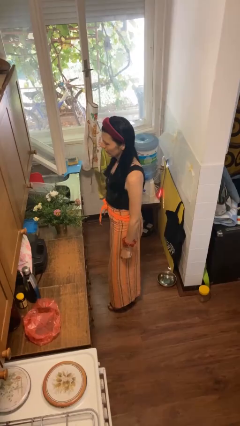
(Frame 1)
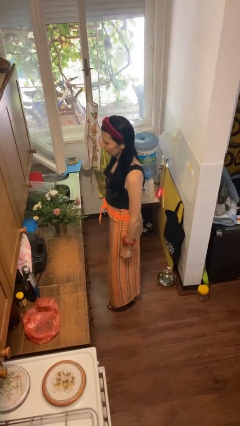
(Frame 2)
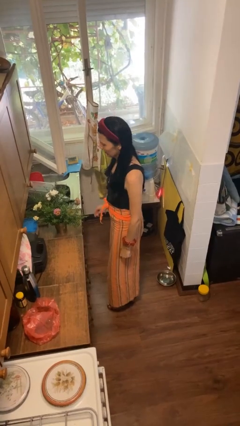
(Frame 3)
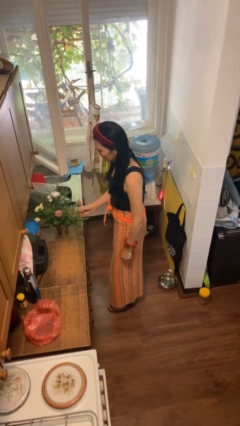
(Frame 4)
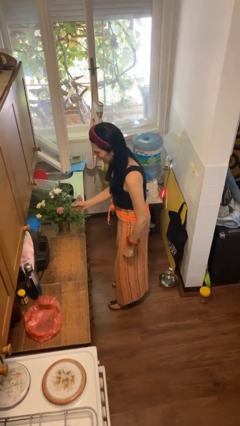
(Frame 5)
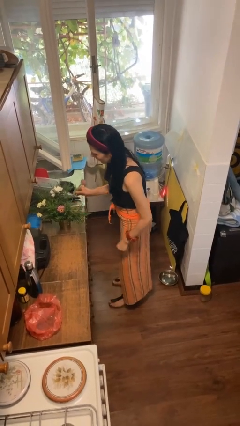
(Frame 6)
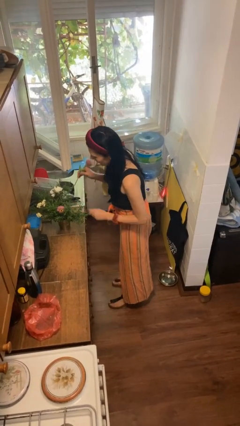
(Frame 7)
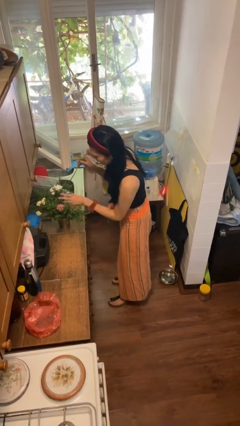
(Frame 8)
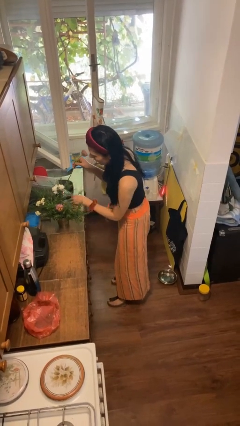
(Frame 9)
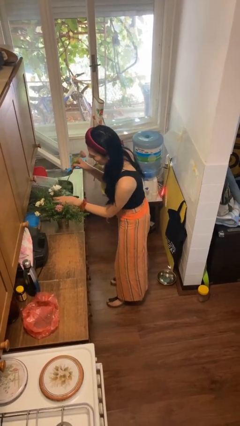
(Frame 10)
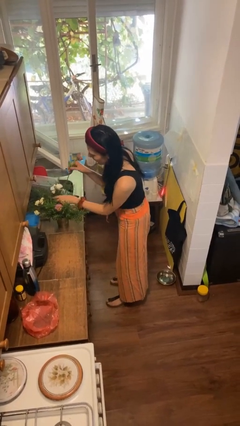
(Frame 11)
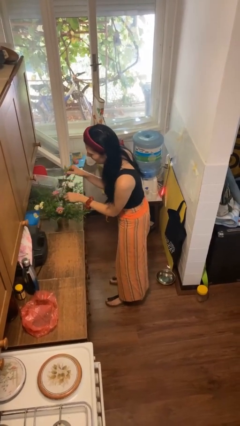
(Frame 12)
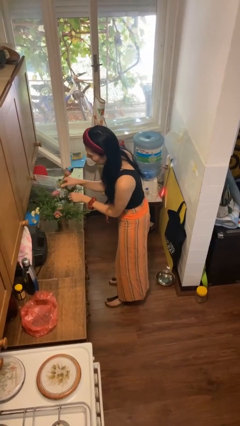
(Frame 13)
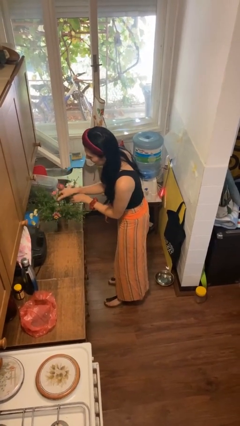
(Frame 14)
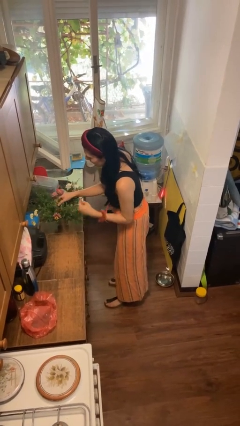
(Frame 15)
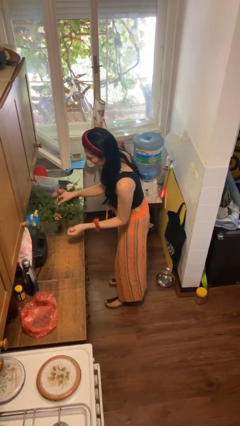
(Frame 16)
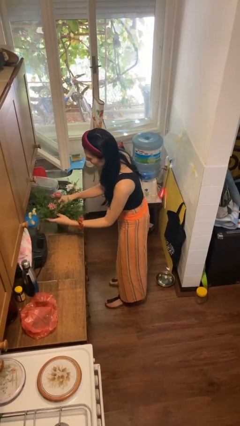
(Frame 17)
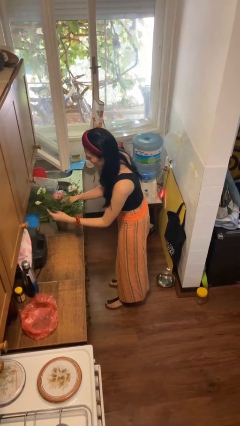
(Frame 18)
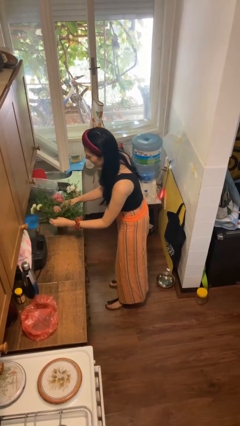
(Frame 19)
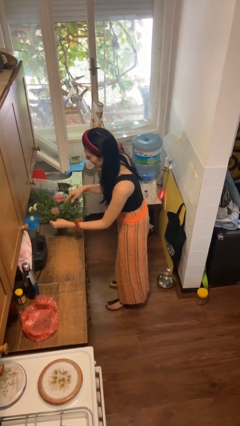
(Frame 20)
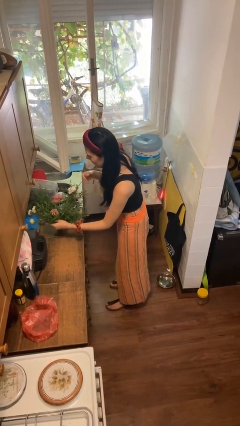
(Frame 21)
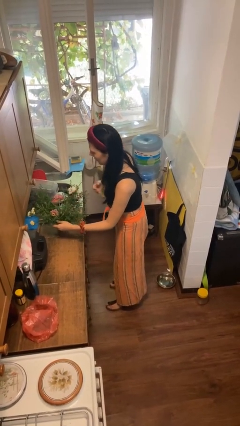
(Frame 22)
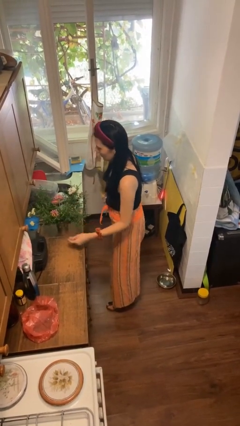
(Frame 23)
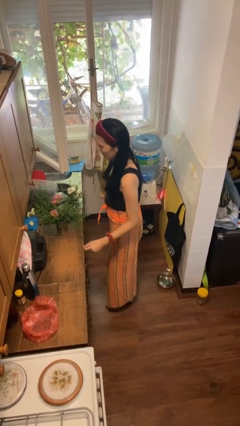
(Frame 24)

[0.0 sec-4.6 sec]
person arranges flowers in vase

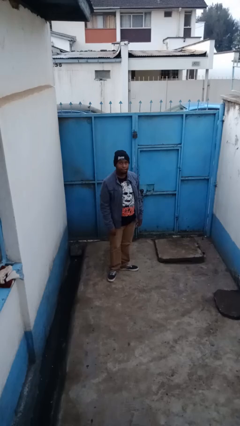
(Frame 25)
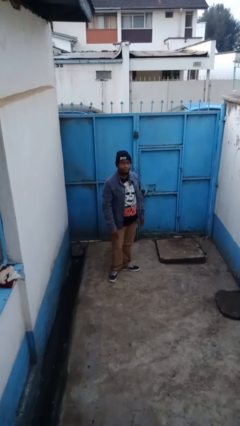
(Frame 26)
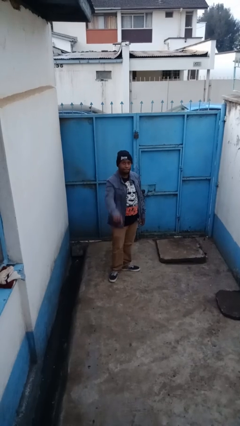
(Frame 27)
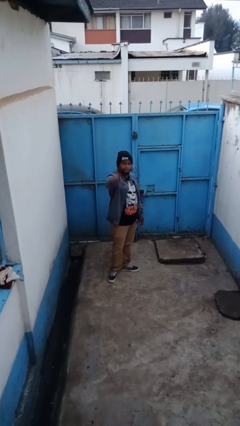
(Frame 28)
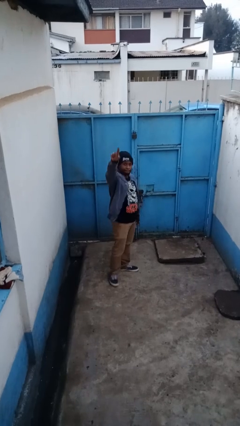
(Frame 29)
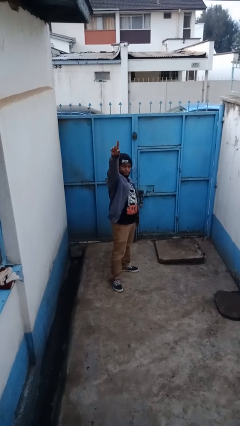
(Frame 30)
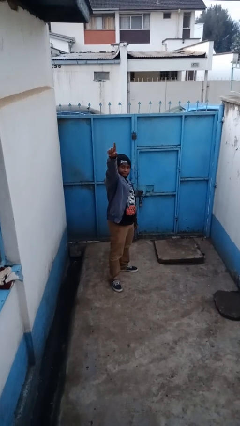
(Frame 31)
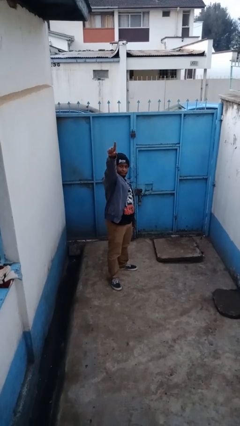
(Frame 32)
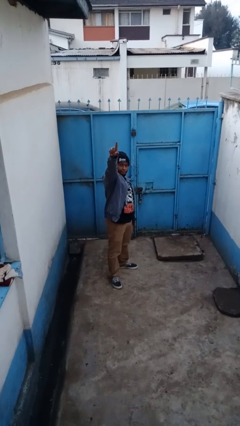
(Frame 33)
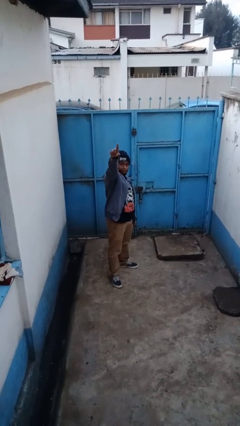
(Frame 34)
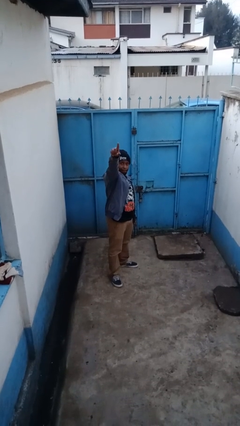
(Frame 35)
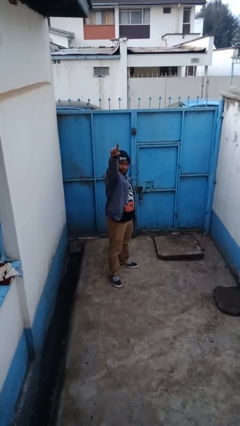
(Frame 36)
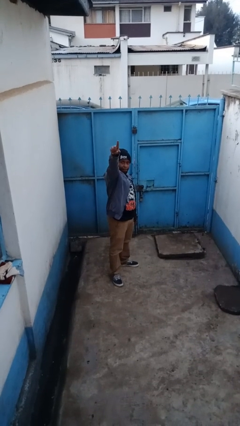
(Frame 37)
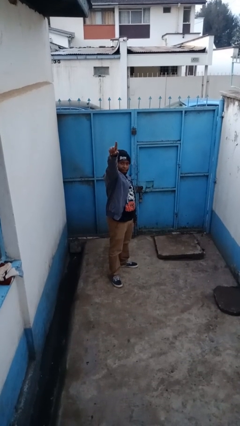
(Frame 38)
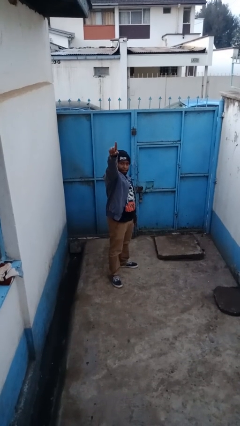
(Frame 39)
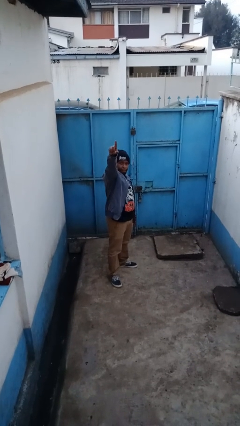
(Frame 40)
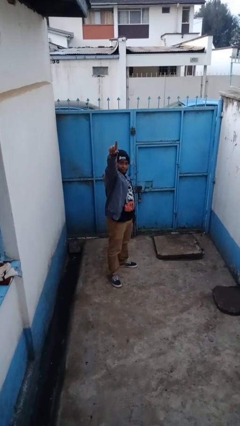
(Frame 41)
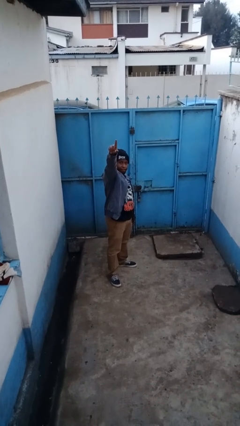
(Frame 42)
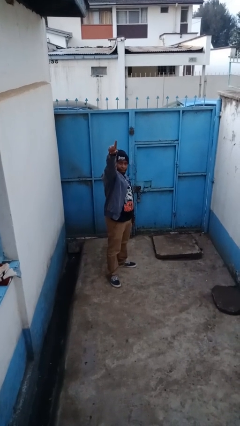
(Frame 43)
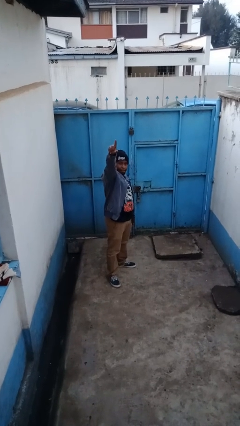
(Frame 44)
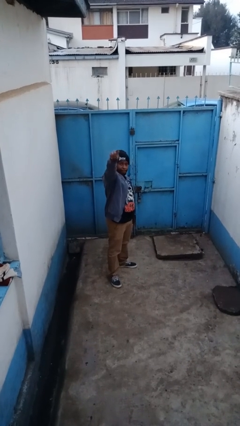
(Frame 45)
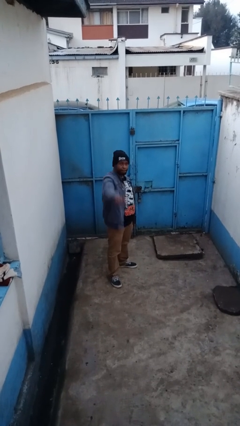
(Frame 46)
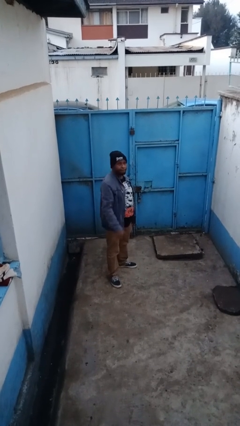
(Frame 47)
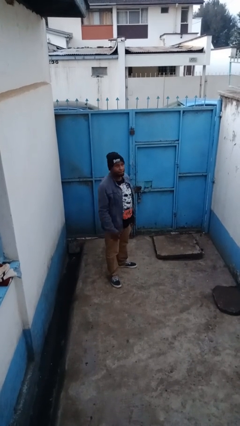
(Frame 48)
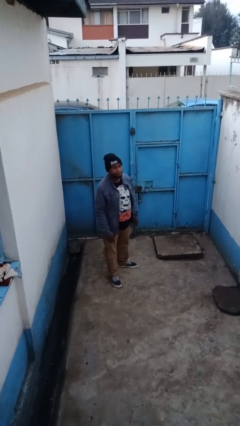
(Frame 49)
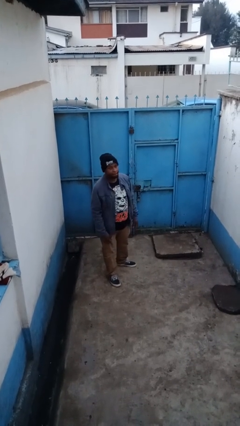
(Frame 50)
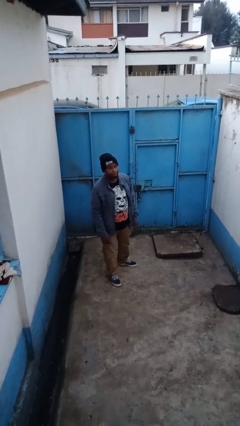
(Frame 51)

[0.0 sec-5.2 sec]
person points at person

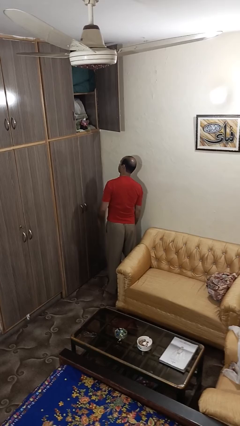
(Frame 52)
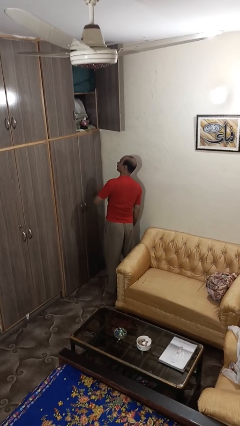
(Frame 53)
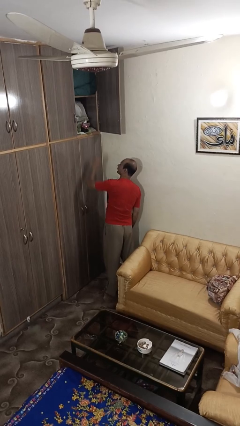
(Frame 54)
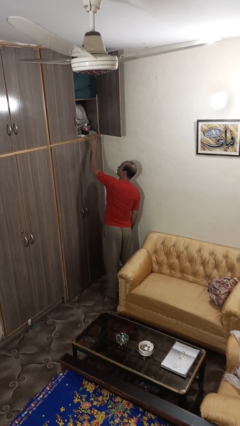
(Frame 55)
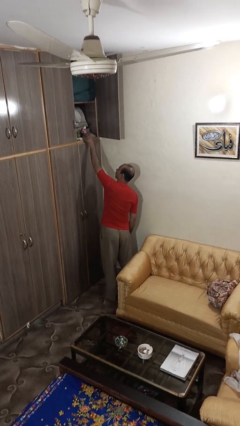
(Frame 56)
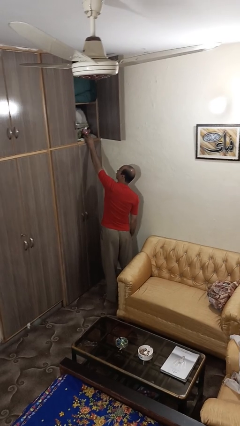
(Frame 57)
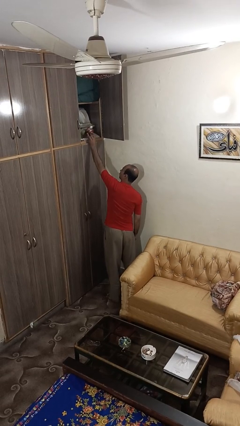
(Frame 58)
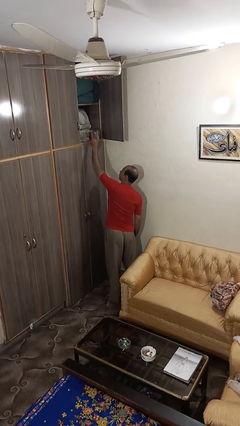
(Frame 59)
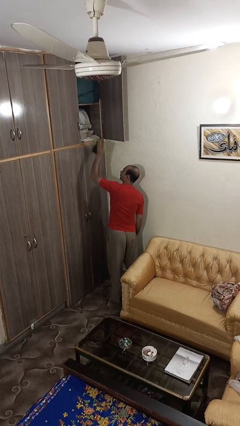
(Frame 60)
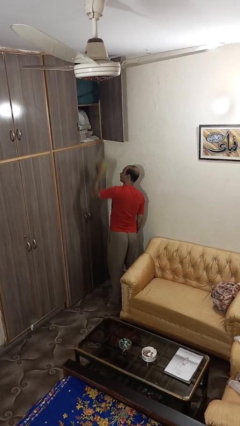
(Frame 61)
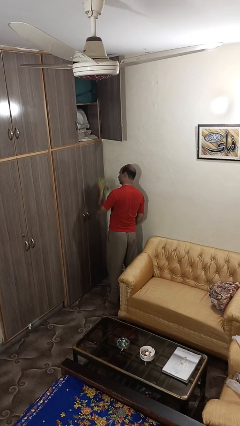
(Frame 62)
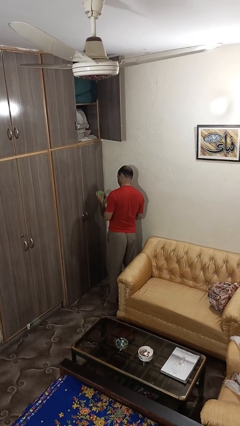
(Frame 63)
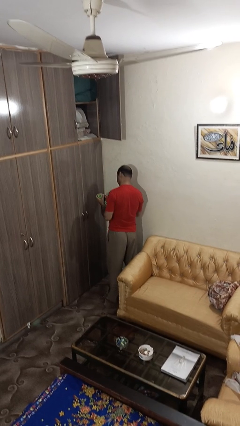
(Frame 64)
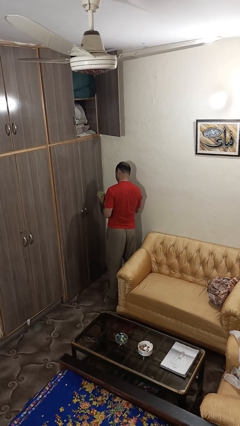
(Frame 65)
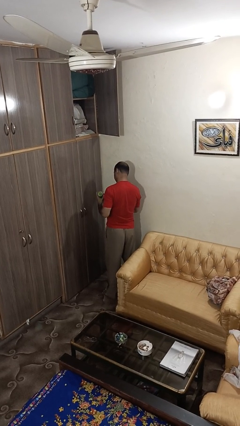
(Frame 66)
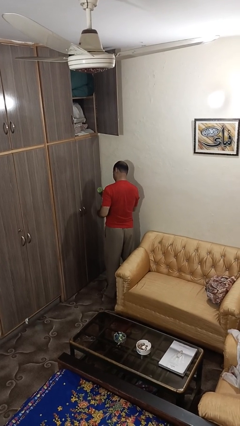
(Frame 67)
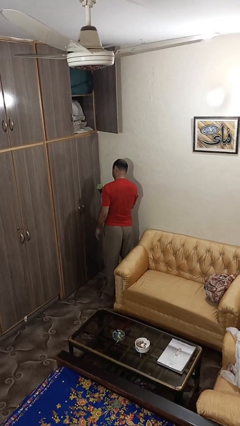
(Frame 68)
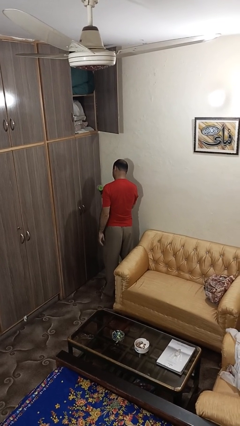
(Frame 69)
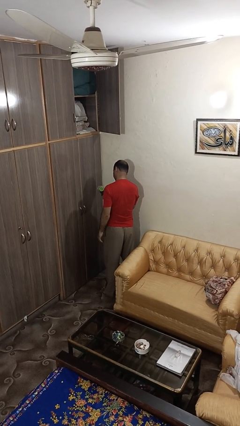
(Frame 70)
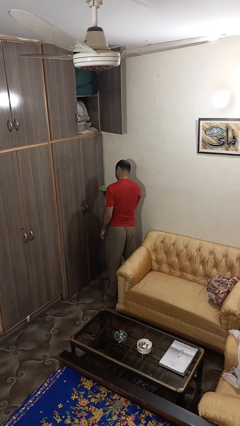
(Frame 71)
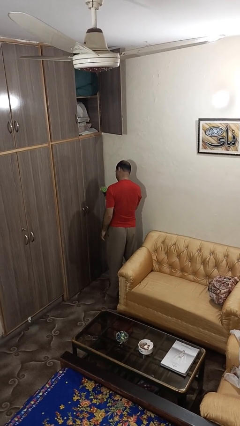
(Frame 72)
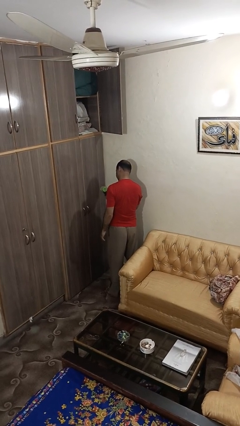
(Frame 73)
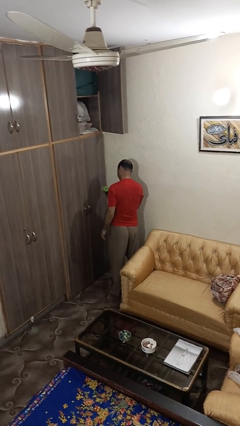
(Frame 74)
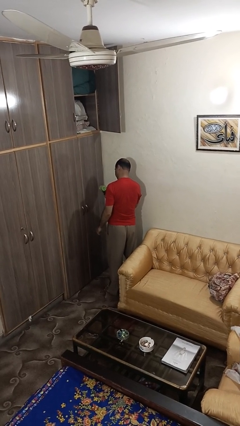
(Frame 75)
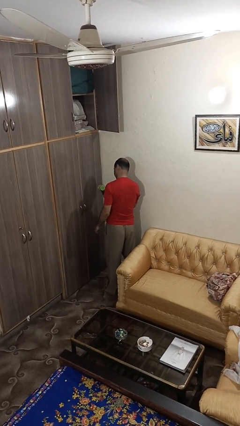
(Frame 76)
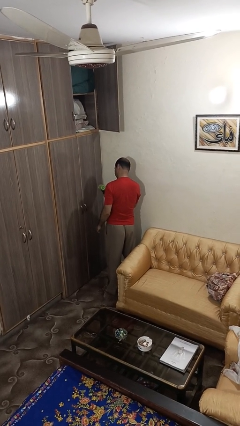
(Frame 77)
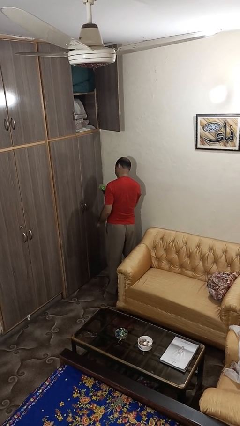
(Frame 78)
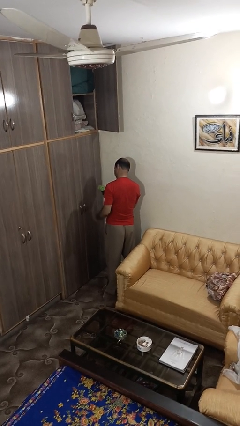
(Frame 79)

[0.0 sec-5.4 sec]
person picks up object from shelf

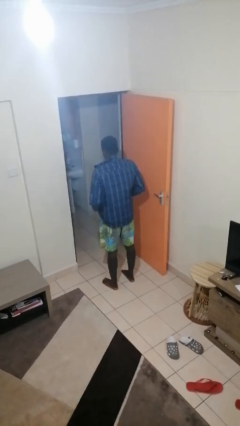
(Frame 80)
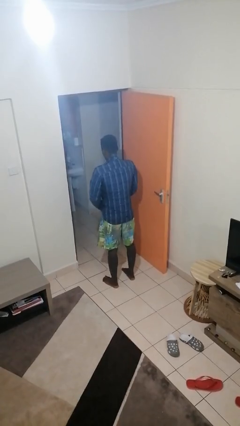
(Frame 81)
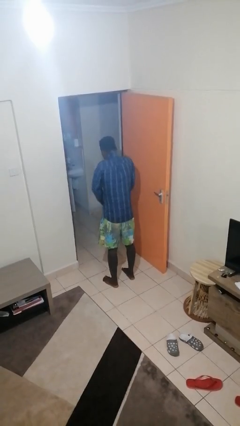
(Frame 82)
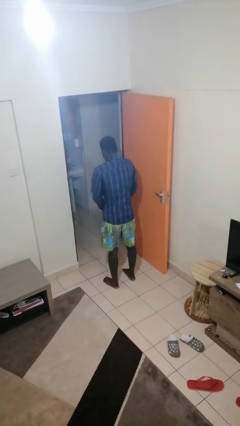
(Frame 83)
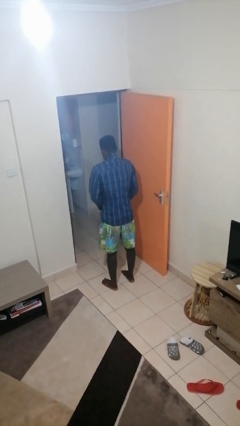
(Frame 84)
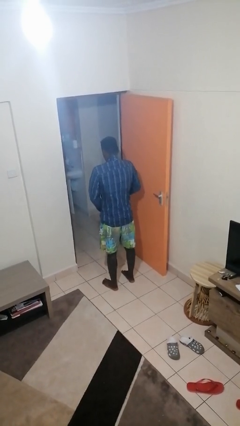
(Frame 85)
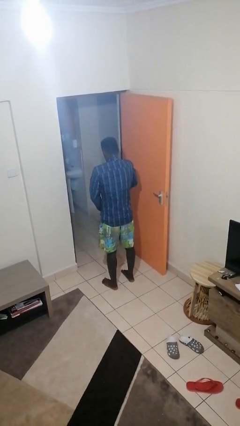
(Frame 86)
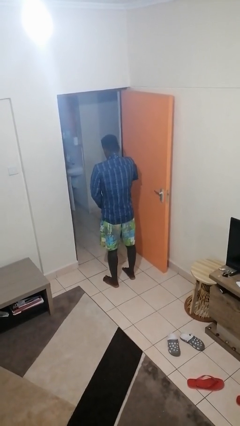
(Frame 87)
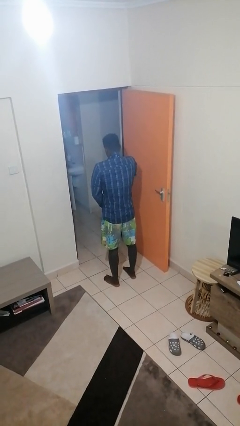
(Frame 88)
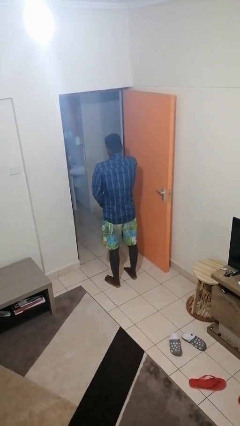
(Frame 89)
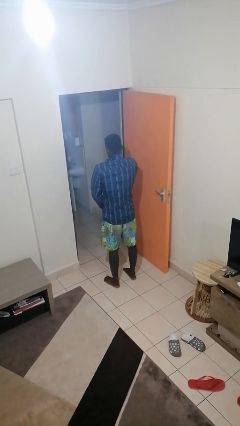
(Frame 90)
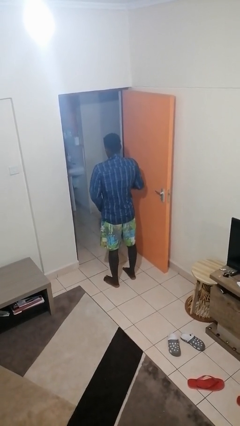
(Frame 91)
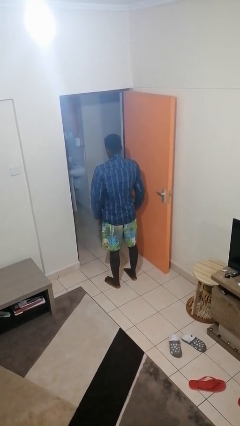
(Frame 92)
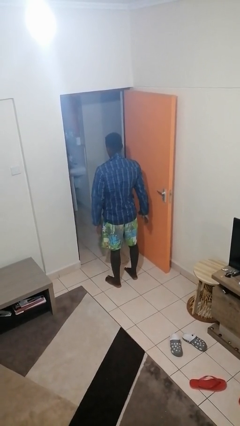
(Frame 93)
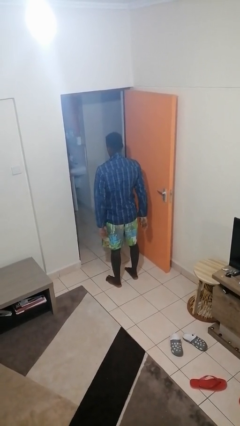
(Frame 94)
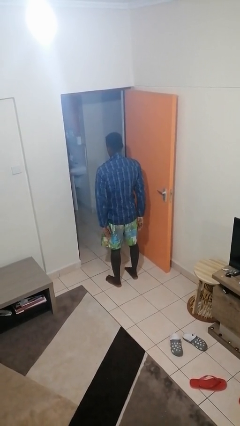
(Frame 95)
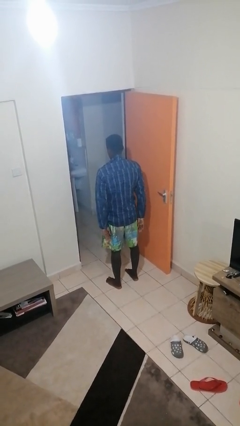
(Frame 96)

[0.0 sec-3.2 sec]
person zips up jacket
